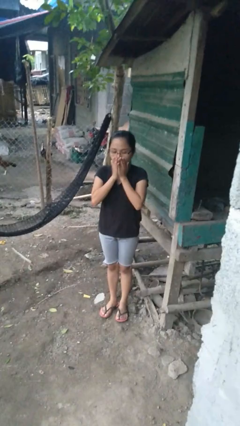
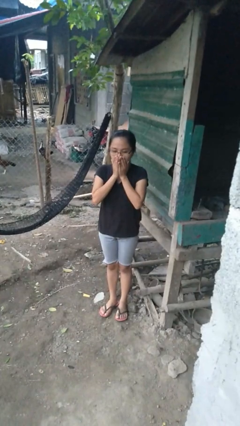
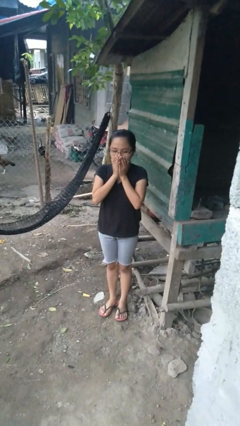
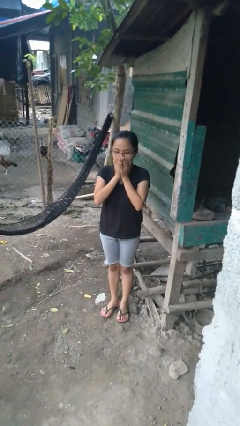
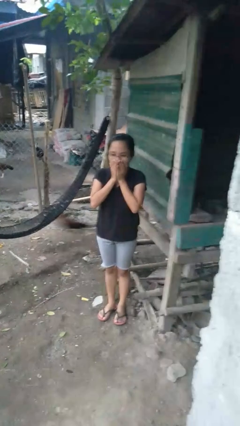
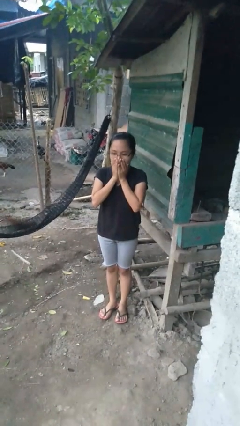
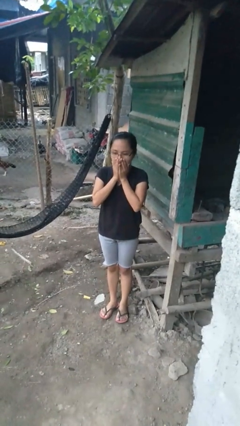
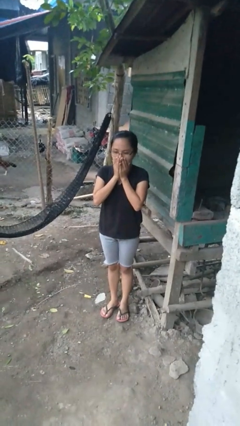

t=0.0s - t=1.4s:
person blows into hands

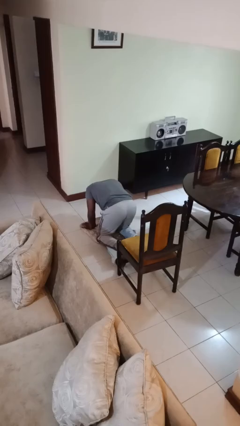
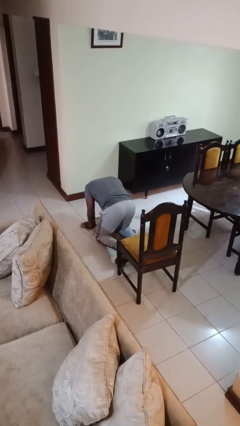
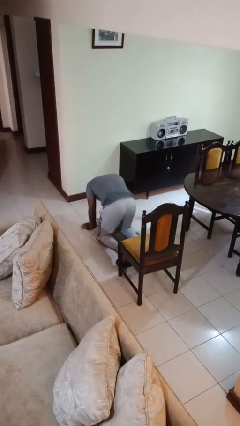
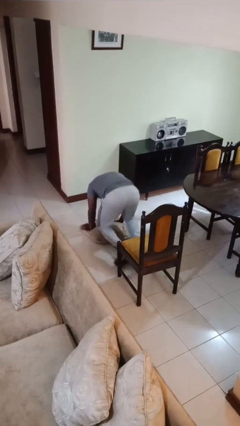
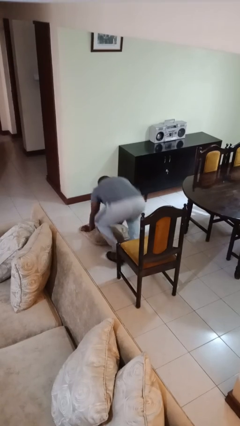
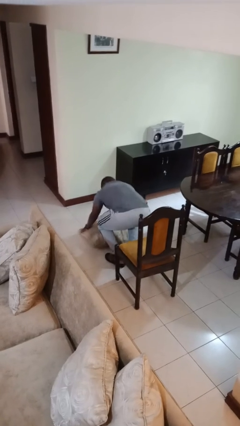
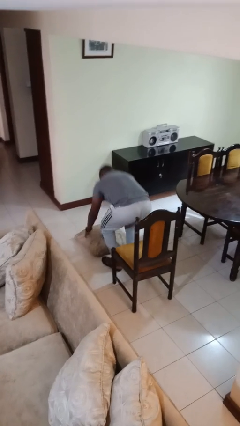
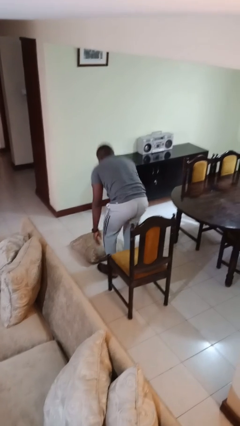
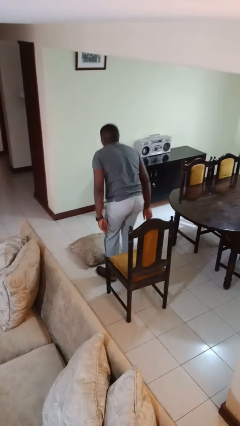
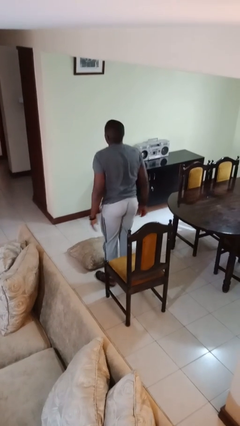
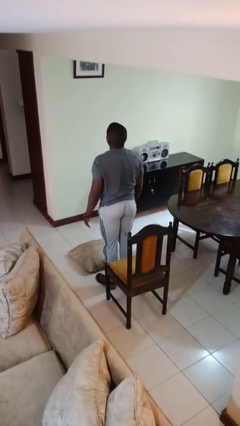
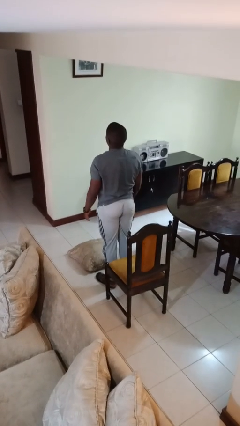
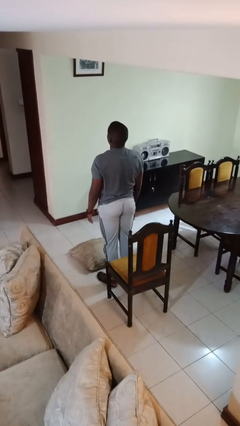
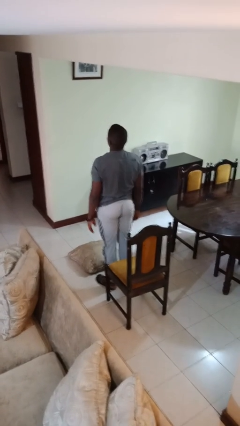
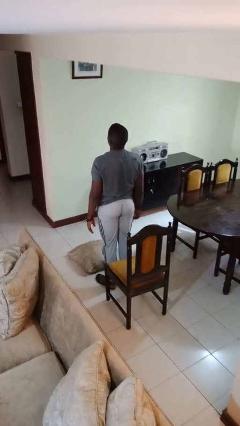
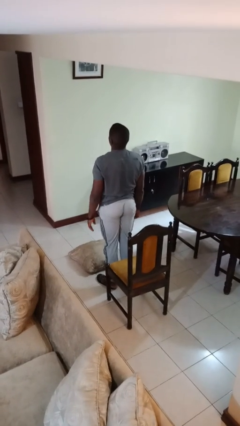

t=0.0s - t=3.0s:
person stands up from floor

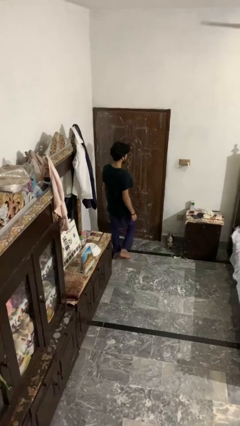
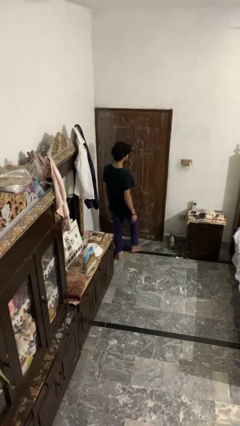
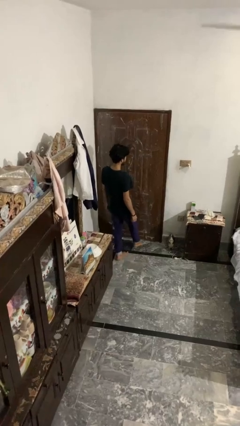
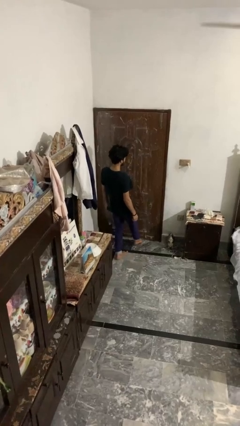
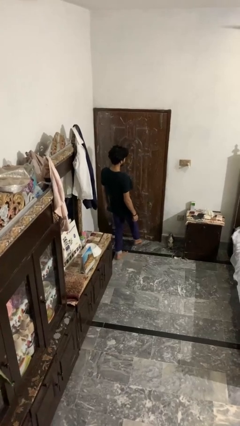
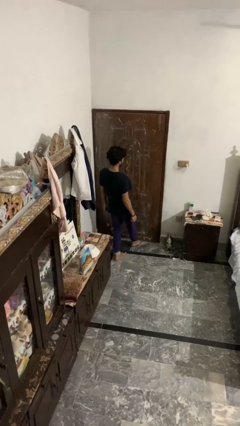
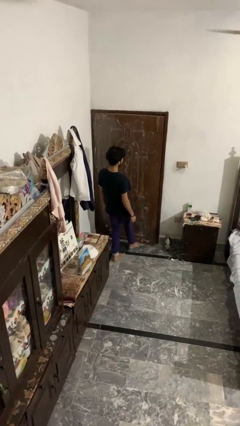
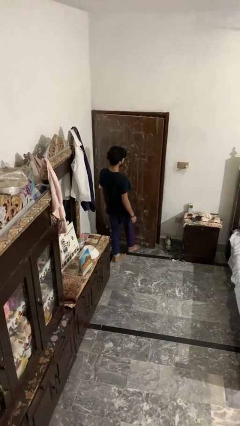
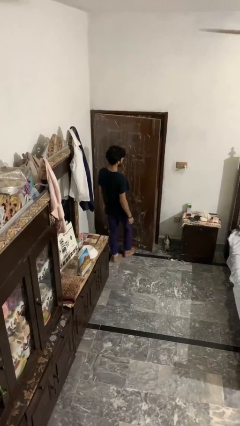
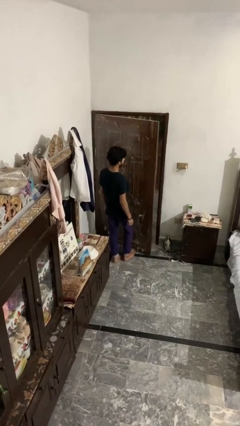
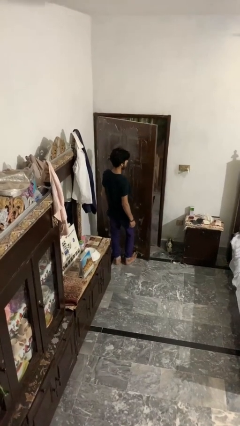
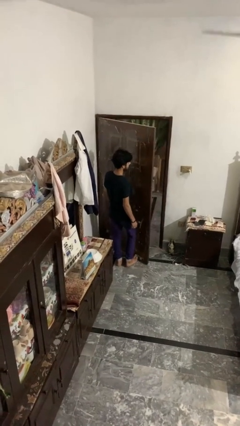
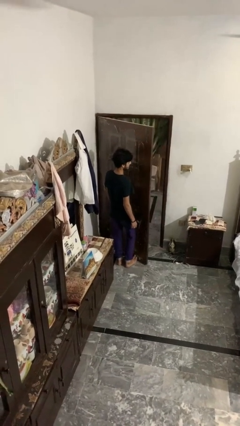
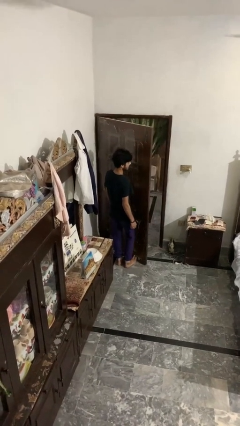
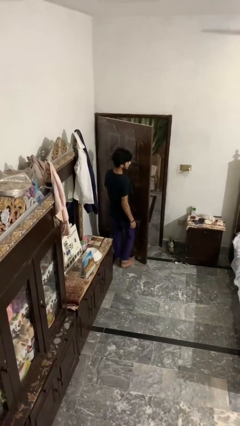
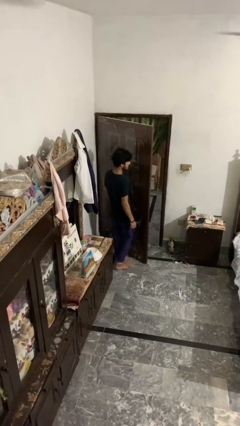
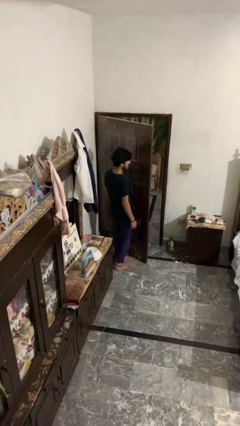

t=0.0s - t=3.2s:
person opens facility door

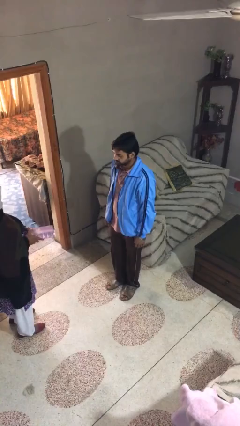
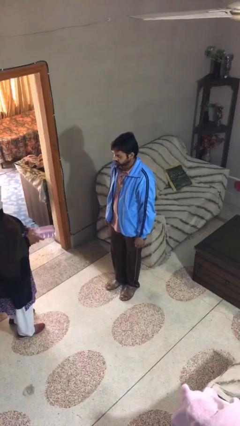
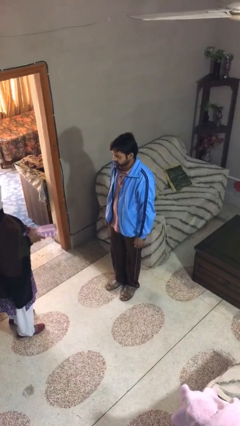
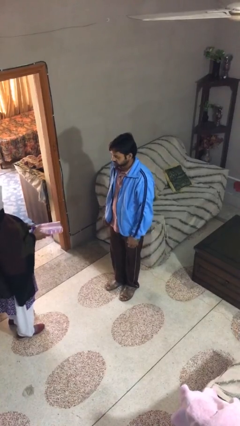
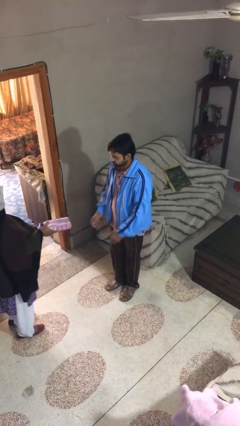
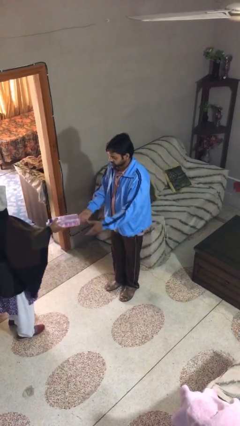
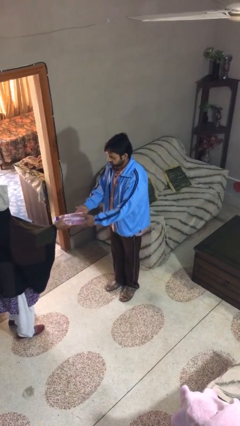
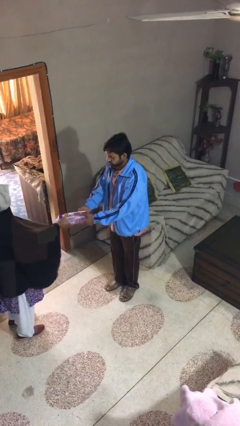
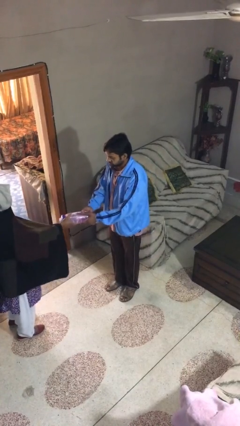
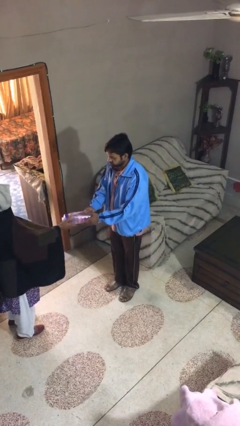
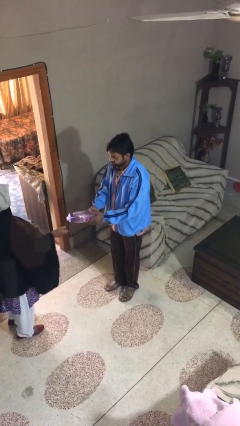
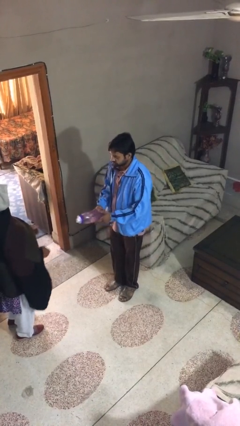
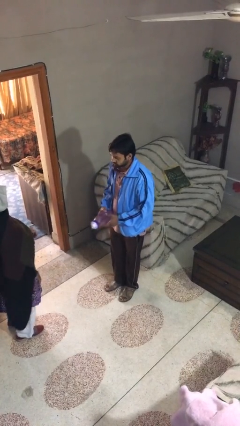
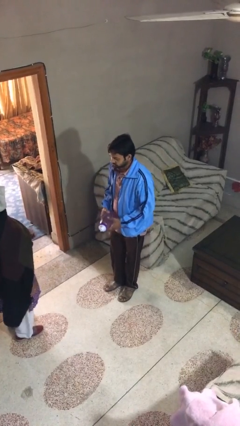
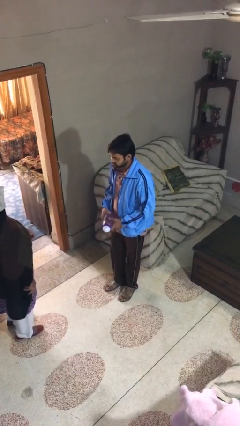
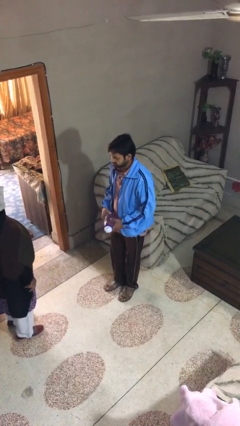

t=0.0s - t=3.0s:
person transfers object to person

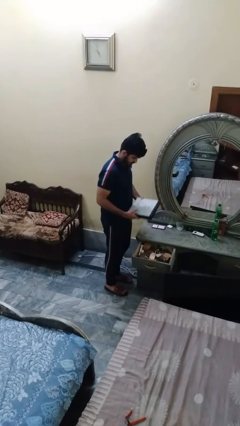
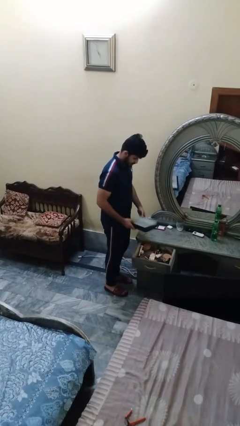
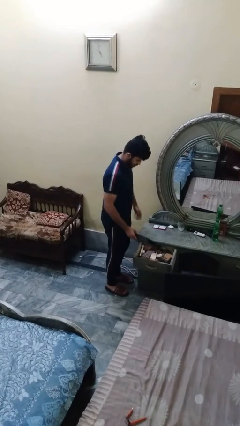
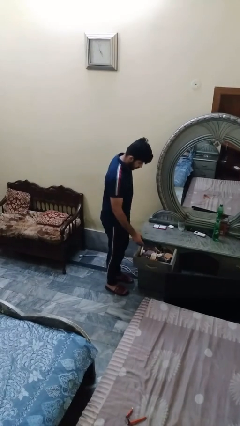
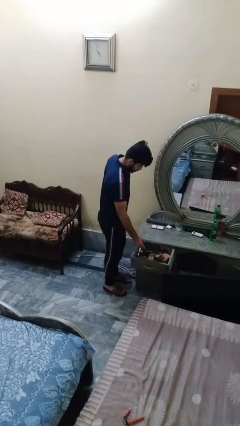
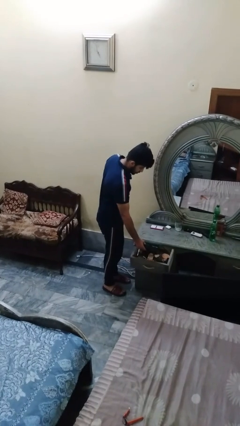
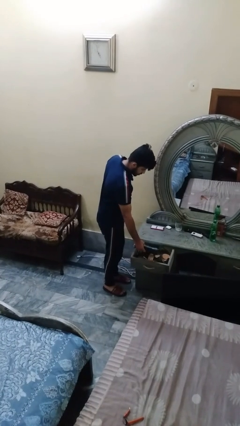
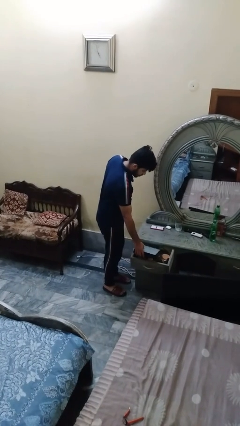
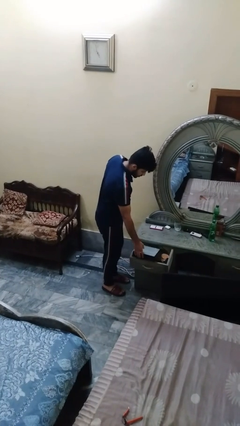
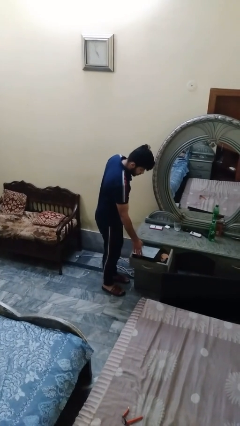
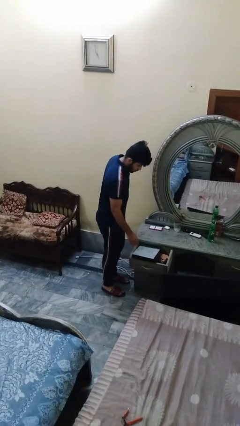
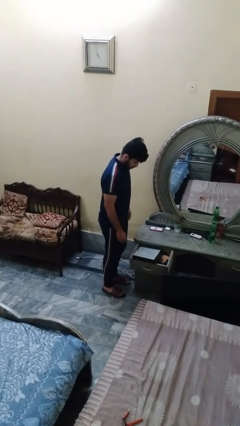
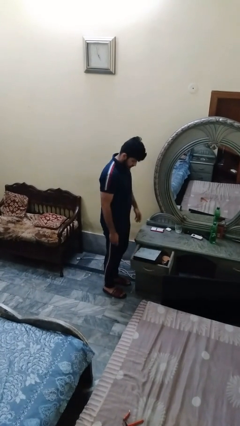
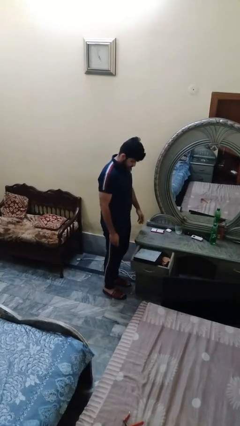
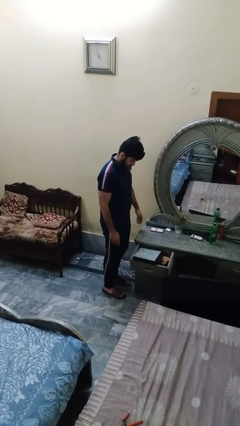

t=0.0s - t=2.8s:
person puts down object into cabinet

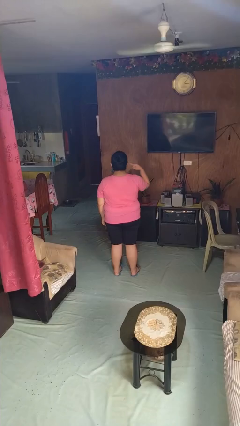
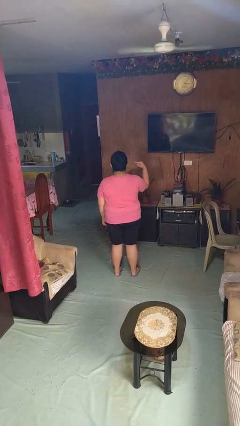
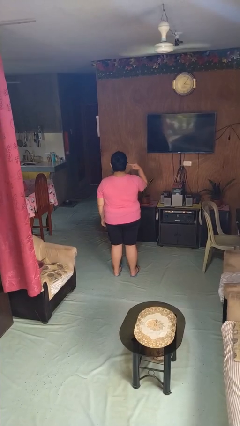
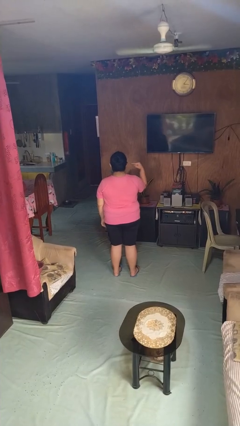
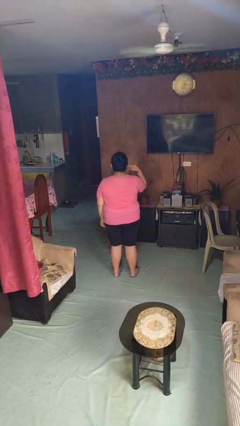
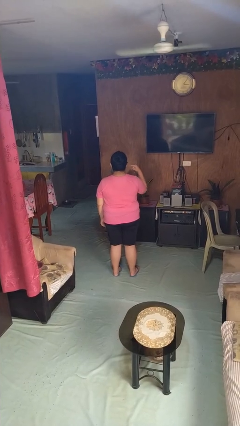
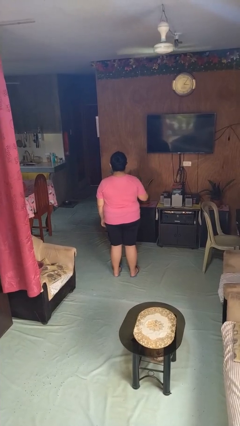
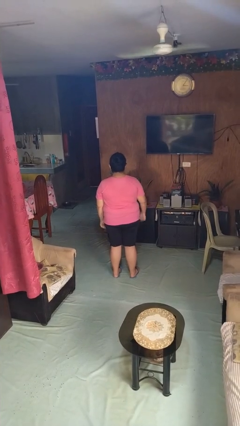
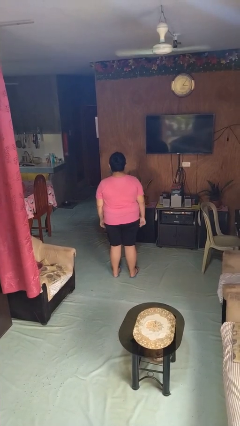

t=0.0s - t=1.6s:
person gestures listen closely

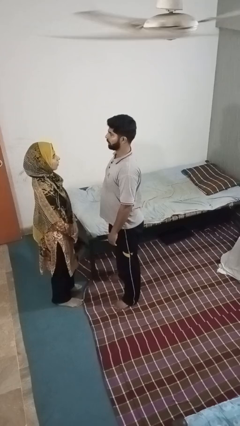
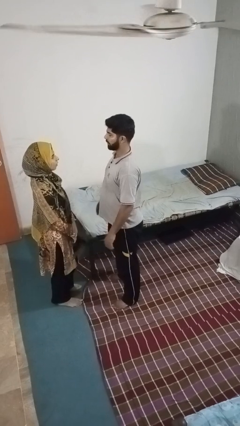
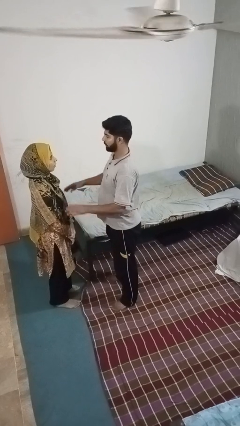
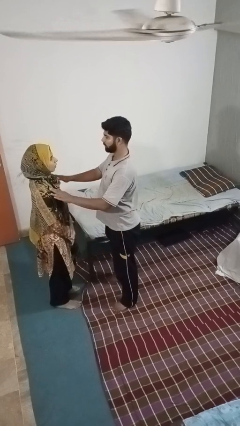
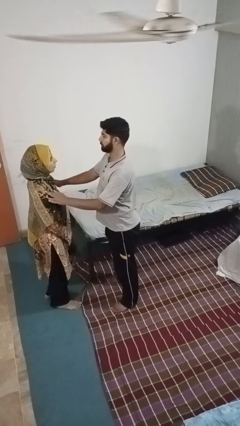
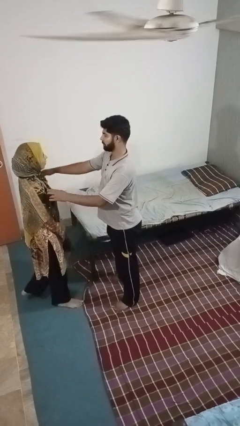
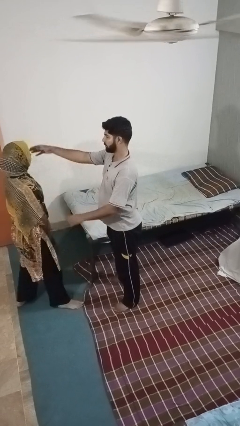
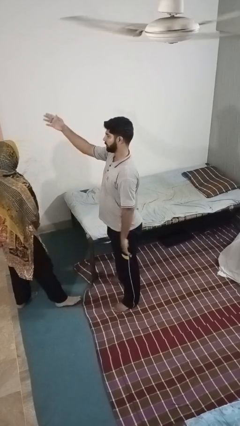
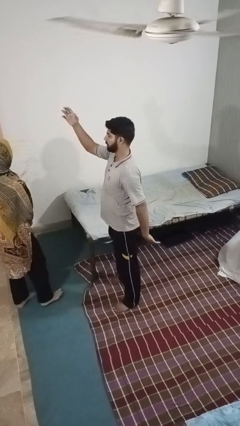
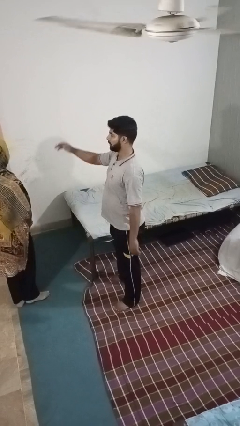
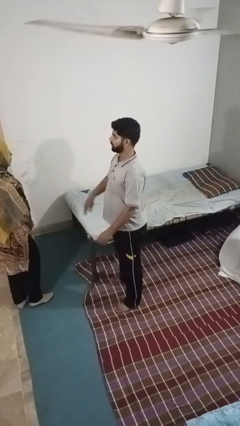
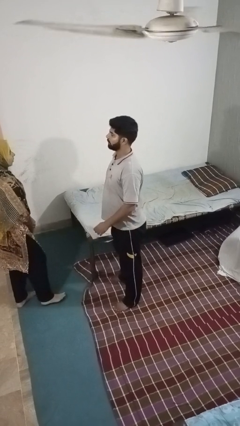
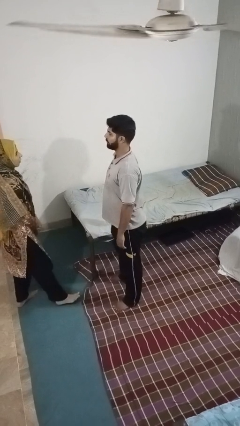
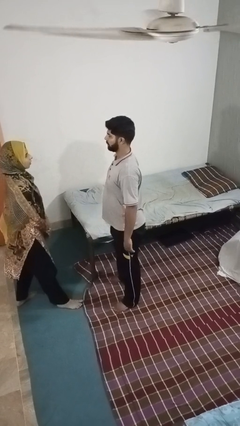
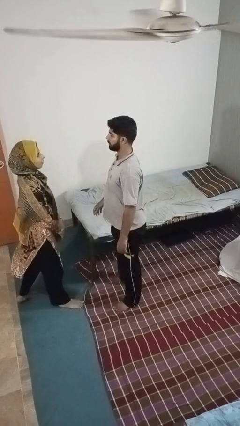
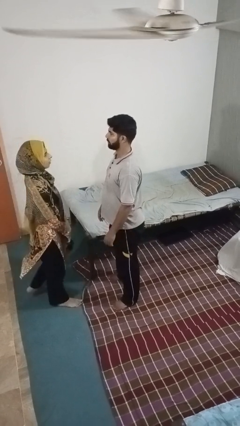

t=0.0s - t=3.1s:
person shoves person
